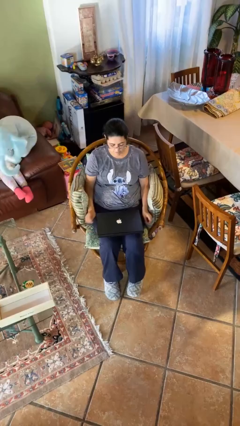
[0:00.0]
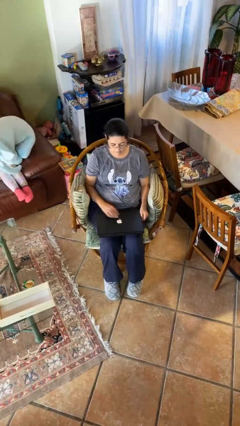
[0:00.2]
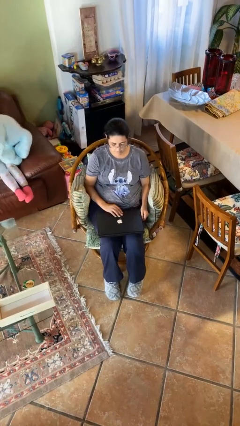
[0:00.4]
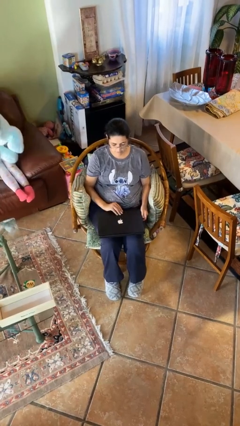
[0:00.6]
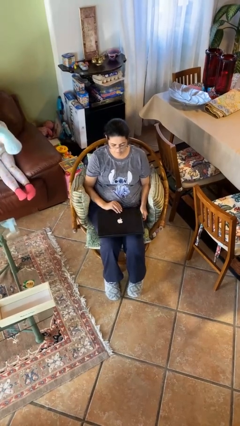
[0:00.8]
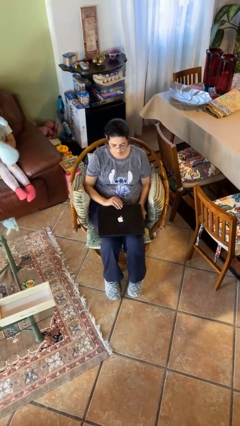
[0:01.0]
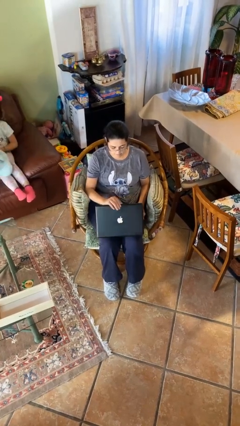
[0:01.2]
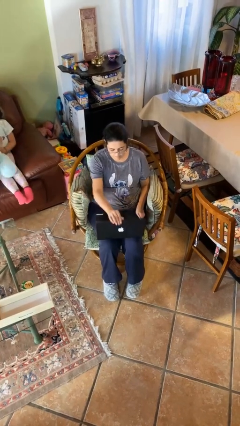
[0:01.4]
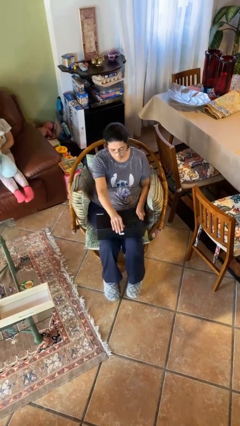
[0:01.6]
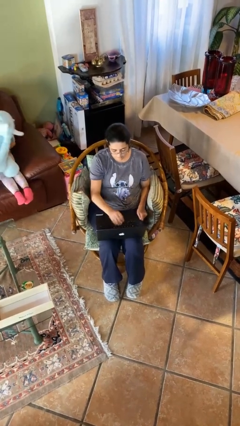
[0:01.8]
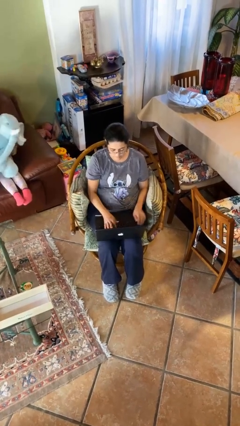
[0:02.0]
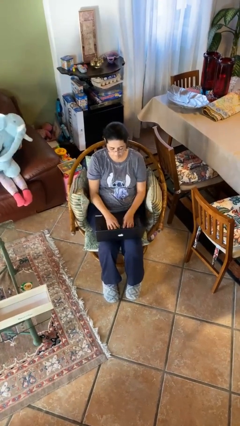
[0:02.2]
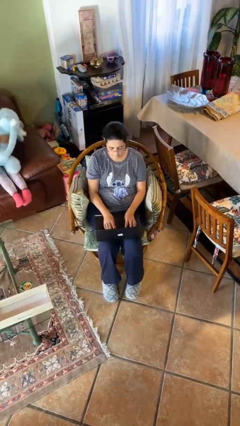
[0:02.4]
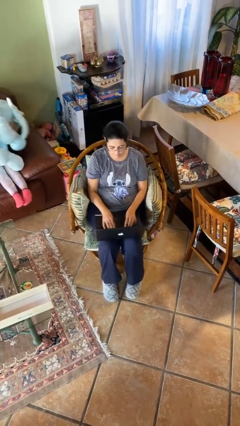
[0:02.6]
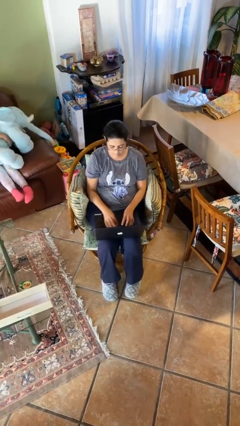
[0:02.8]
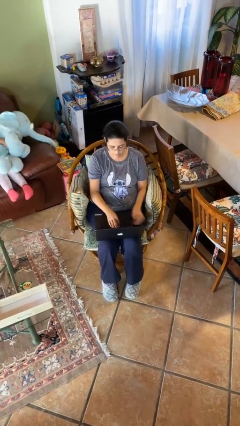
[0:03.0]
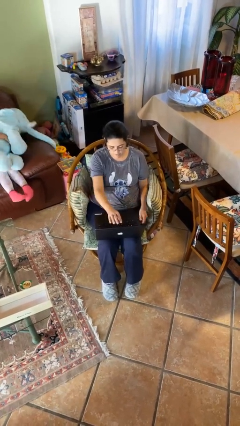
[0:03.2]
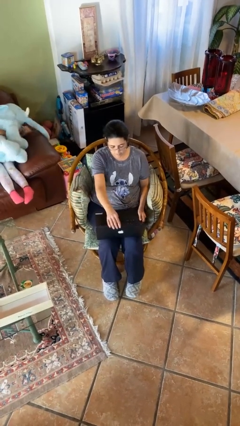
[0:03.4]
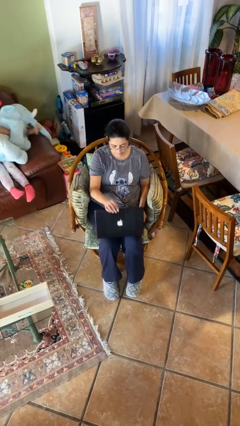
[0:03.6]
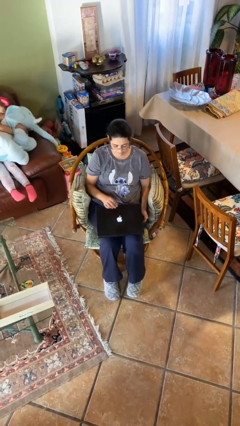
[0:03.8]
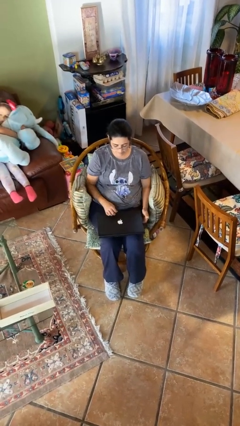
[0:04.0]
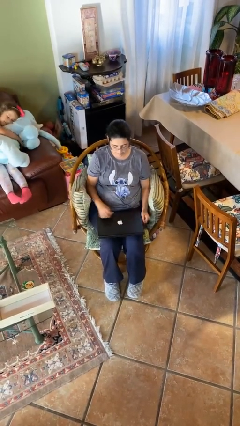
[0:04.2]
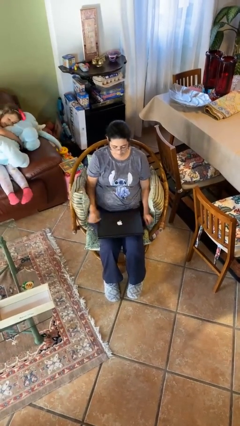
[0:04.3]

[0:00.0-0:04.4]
person interacts with laptop

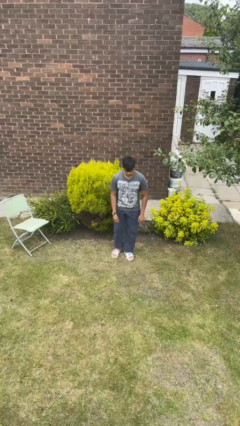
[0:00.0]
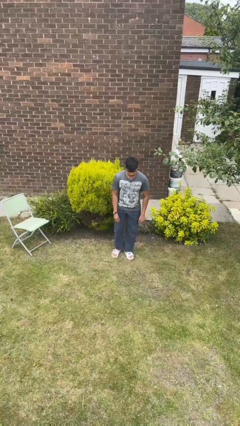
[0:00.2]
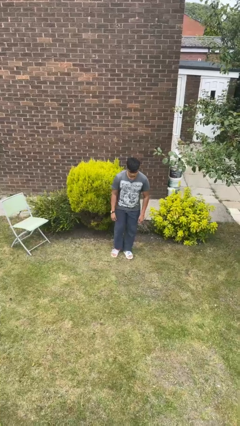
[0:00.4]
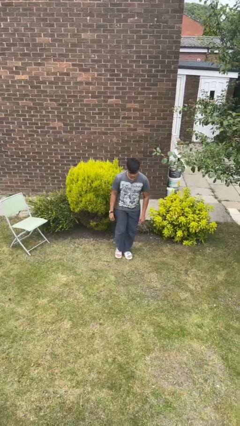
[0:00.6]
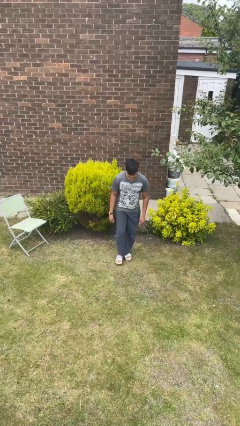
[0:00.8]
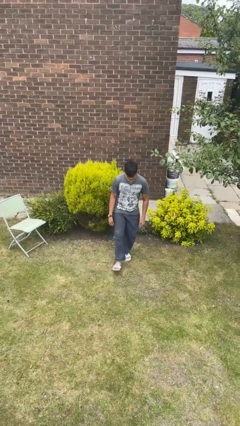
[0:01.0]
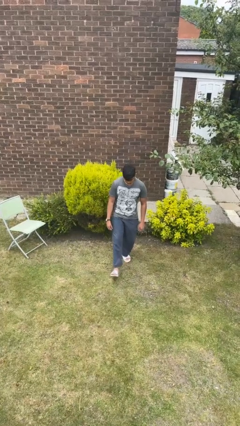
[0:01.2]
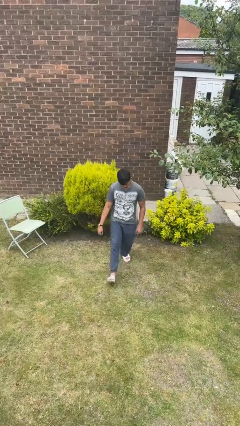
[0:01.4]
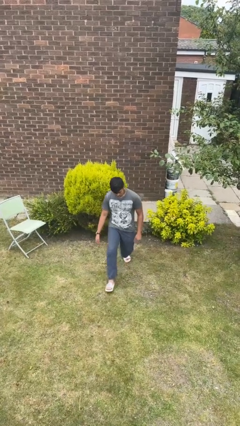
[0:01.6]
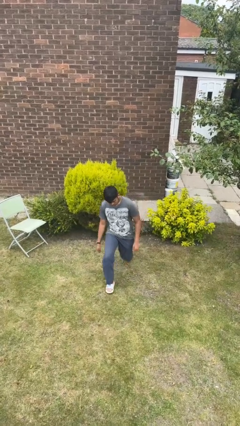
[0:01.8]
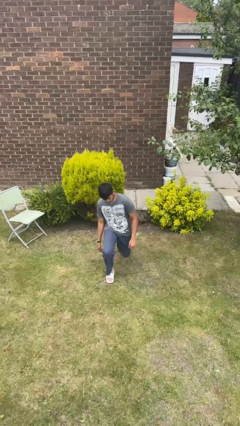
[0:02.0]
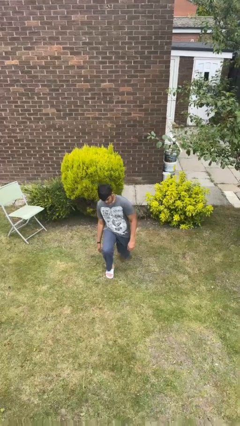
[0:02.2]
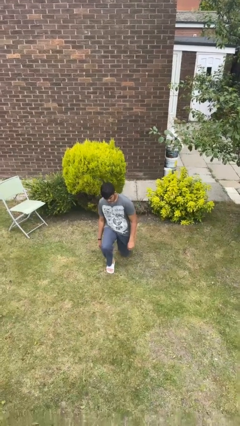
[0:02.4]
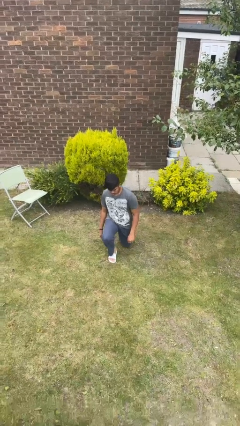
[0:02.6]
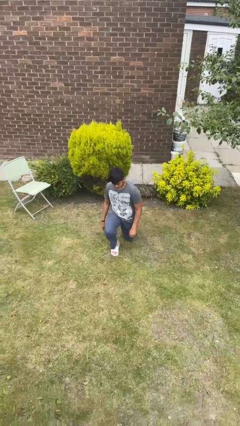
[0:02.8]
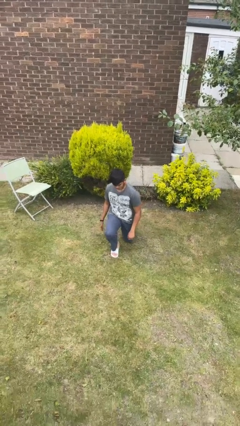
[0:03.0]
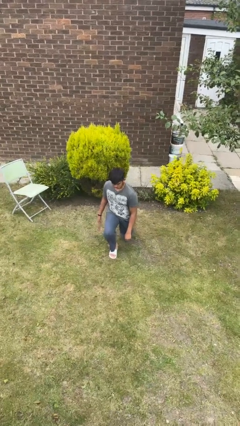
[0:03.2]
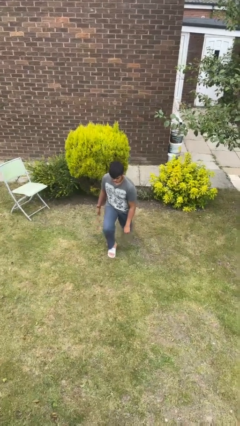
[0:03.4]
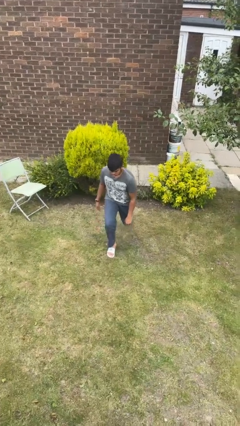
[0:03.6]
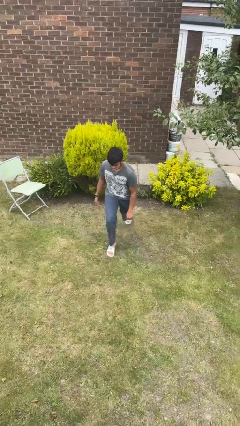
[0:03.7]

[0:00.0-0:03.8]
person exercises with lunges

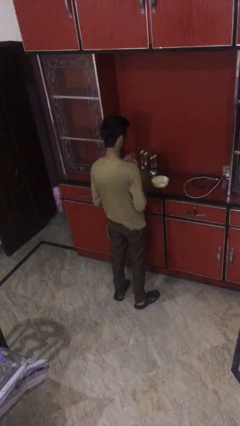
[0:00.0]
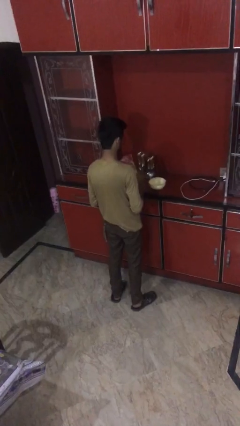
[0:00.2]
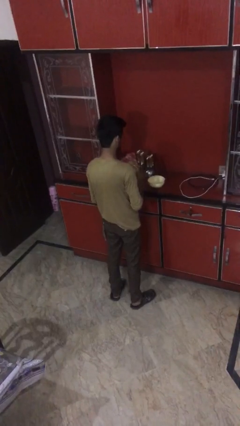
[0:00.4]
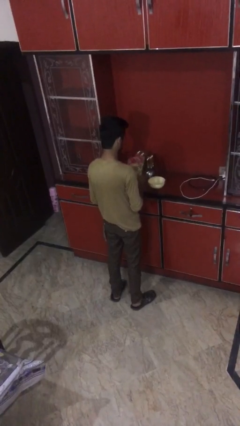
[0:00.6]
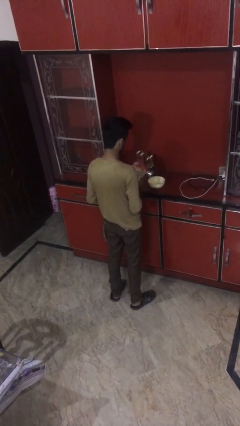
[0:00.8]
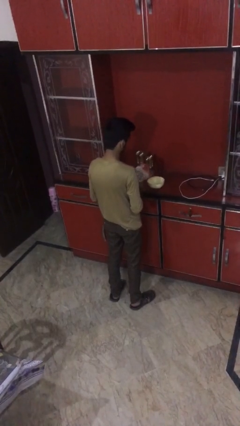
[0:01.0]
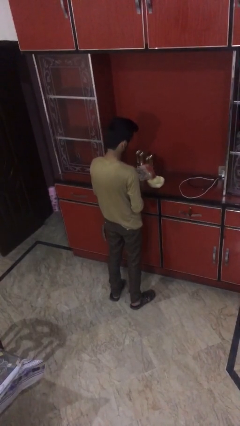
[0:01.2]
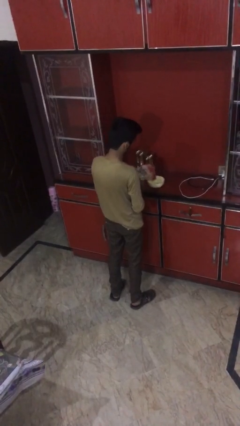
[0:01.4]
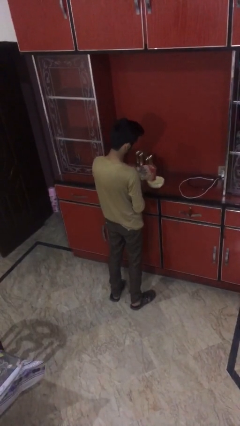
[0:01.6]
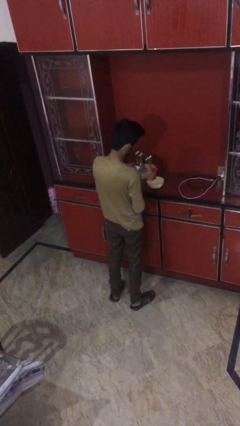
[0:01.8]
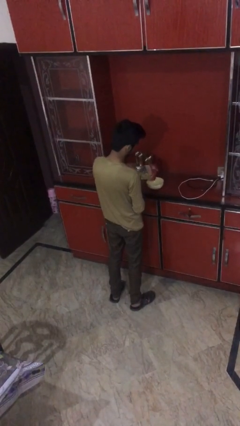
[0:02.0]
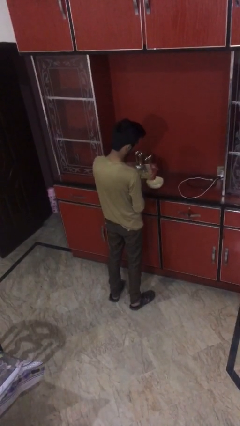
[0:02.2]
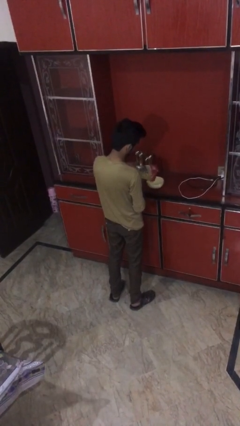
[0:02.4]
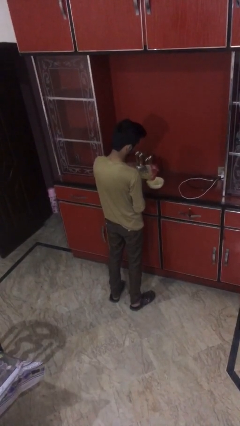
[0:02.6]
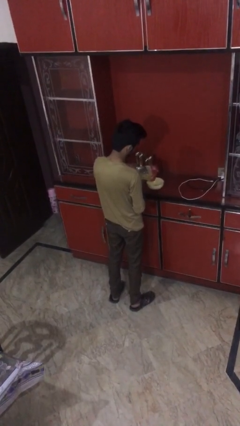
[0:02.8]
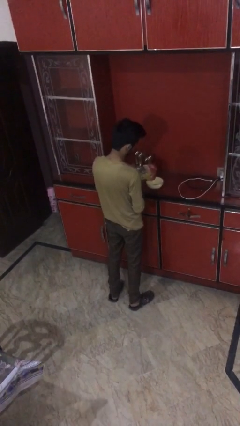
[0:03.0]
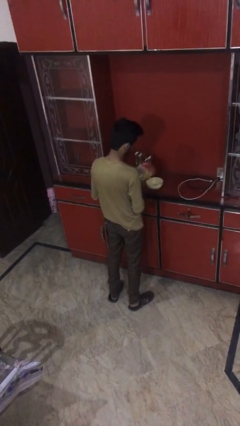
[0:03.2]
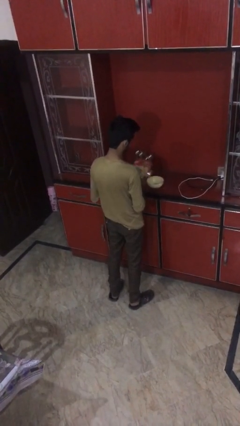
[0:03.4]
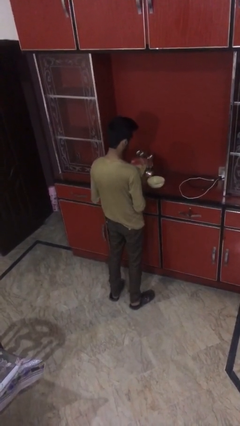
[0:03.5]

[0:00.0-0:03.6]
person pours into bowl

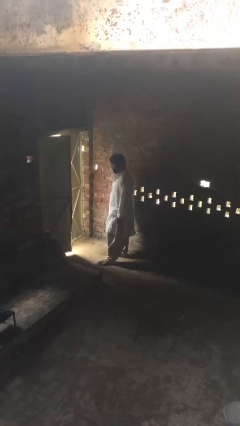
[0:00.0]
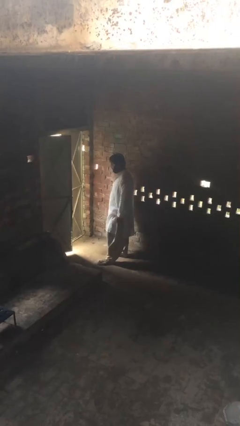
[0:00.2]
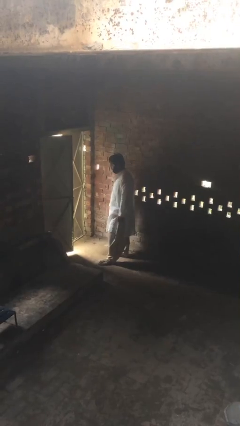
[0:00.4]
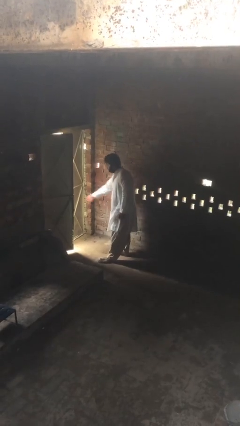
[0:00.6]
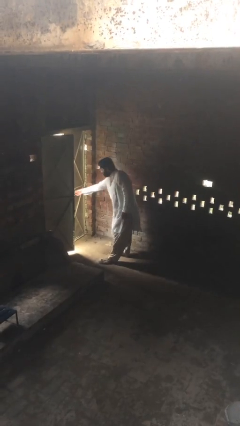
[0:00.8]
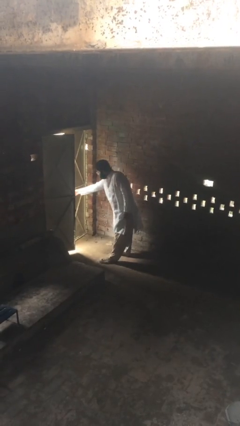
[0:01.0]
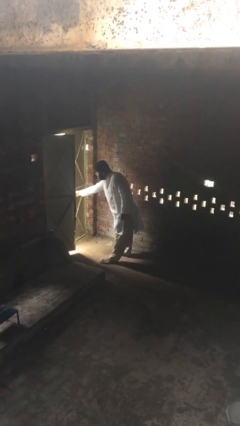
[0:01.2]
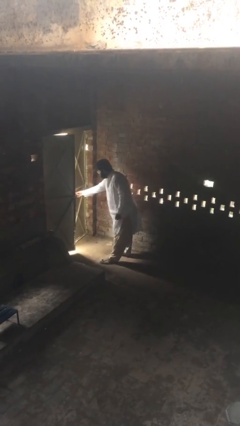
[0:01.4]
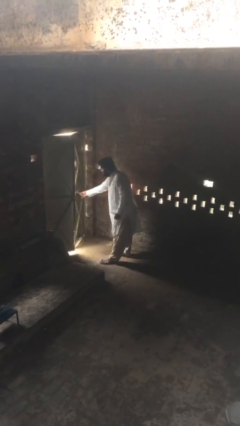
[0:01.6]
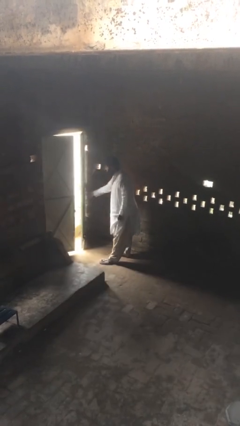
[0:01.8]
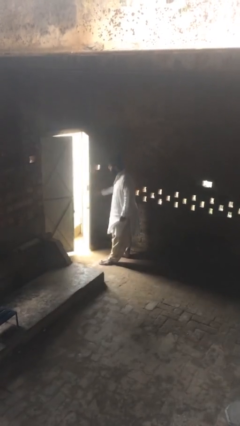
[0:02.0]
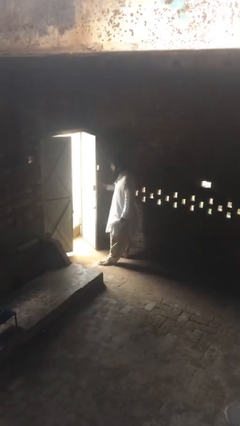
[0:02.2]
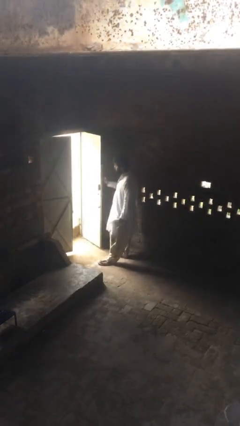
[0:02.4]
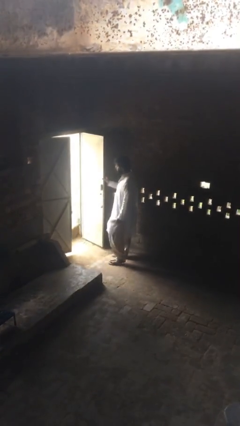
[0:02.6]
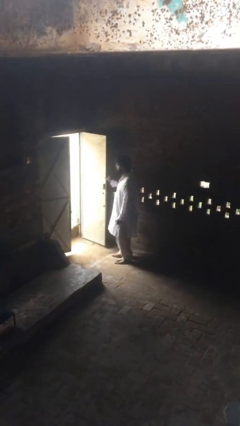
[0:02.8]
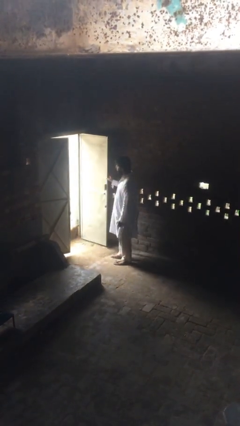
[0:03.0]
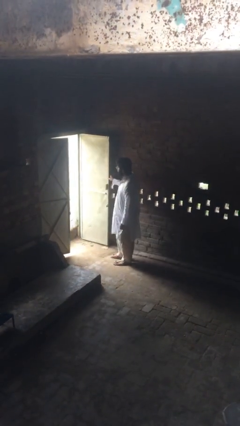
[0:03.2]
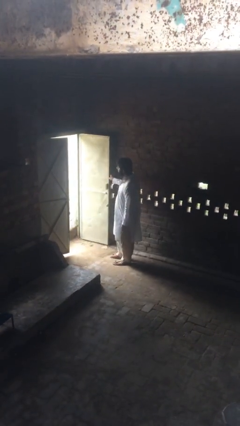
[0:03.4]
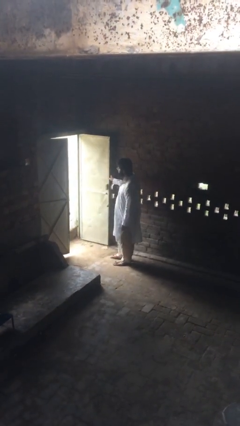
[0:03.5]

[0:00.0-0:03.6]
person opens facility door

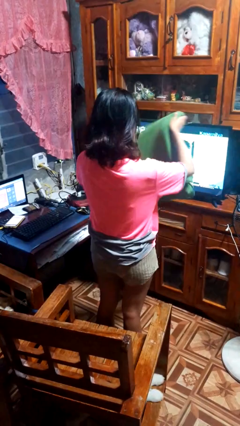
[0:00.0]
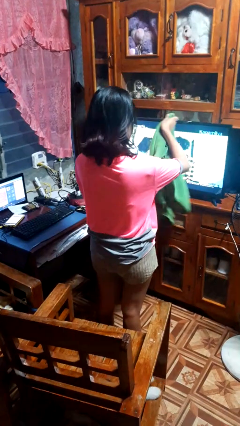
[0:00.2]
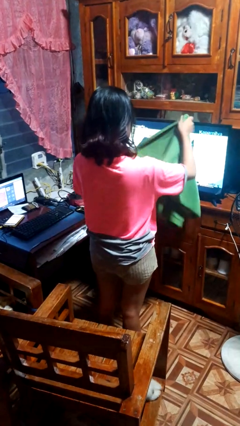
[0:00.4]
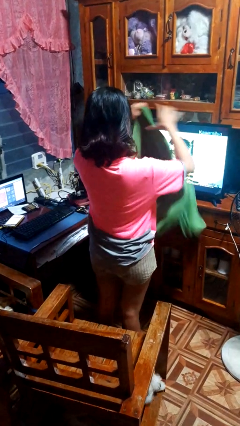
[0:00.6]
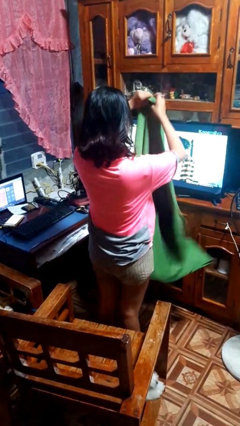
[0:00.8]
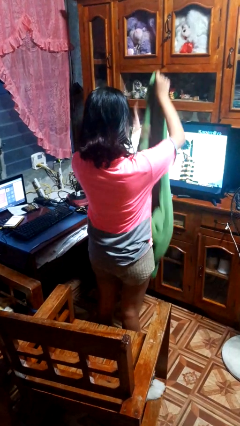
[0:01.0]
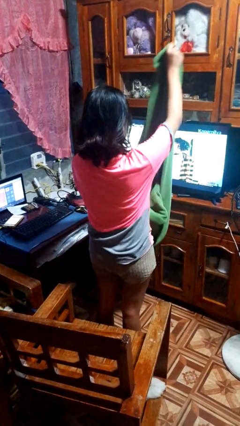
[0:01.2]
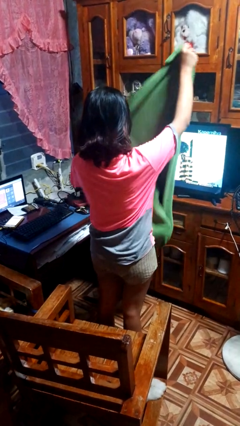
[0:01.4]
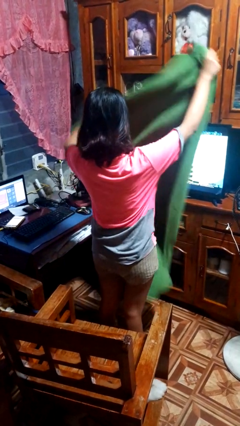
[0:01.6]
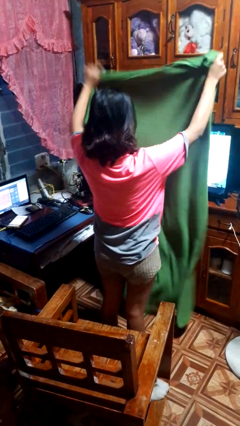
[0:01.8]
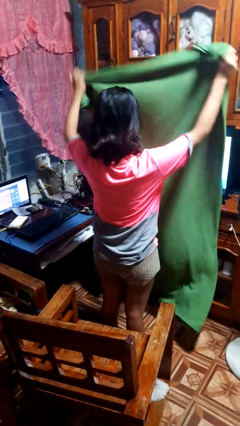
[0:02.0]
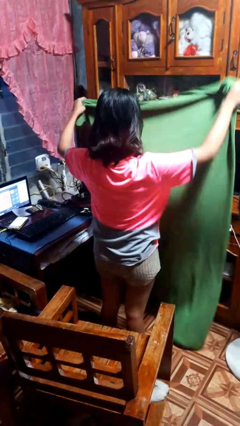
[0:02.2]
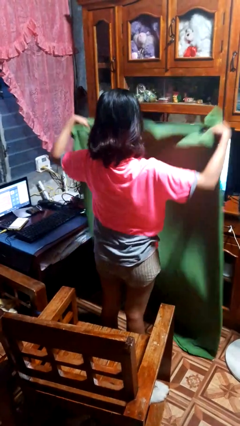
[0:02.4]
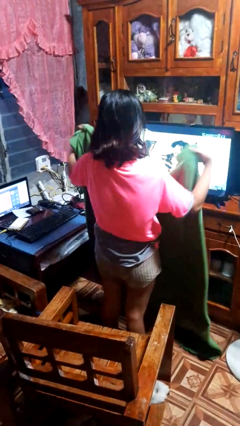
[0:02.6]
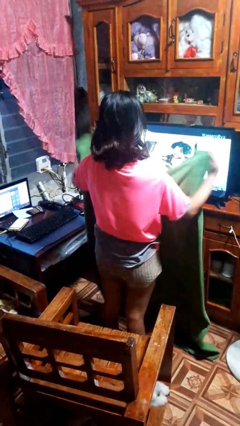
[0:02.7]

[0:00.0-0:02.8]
person unfolds blanket
